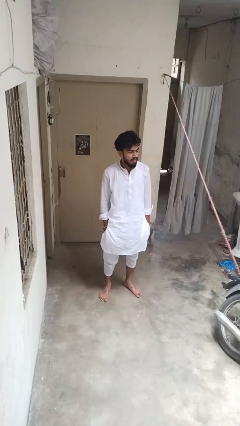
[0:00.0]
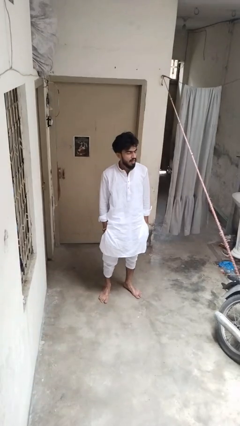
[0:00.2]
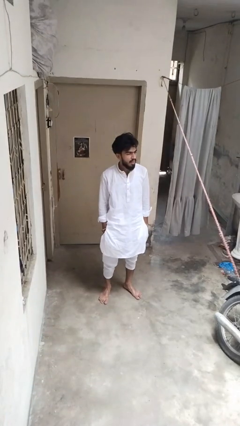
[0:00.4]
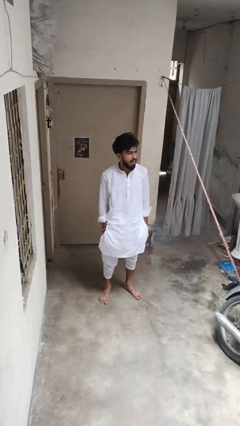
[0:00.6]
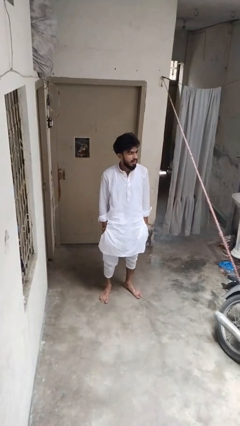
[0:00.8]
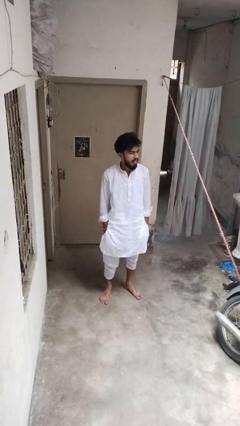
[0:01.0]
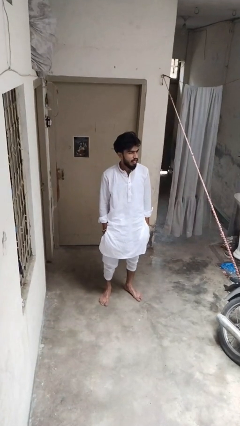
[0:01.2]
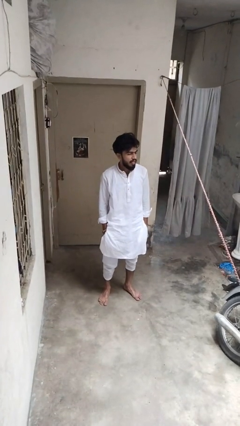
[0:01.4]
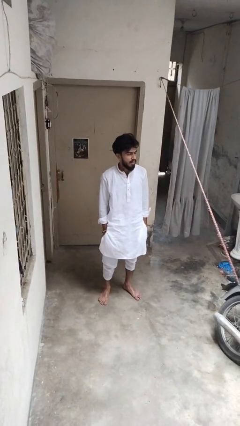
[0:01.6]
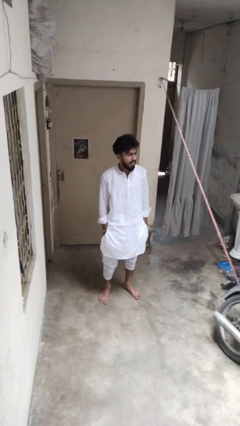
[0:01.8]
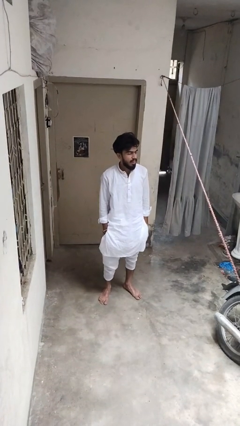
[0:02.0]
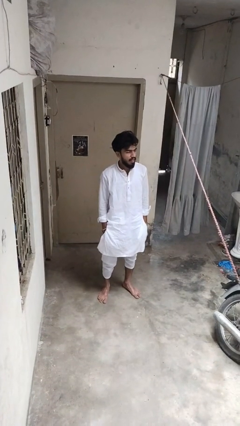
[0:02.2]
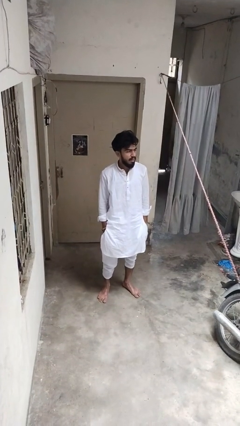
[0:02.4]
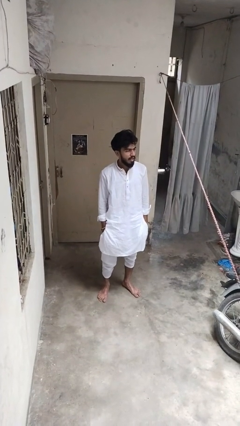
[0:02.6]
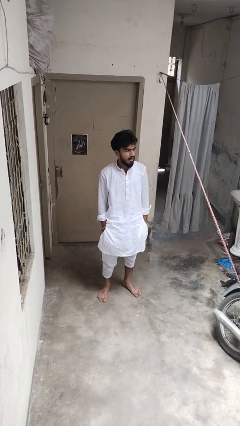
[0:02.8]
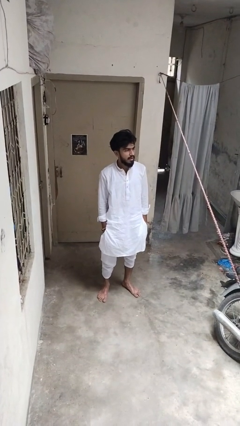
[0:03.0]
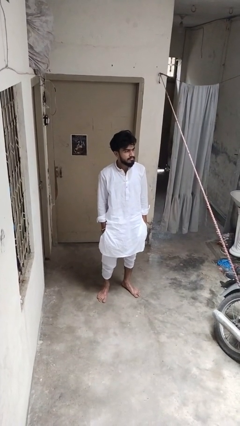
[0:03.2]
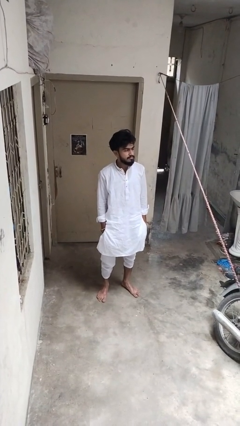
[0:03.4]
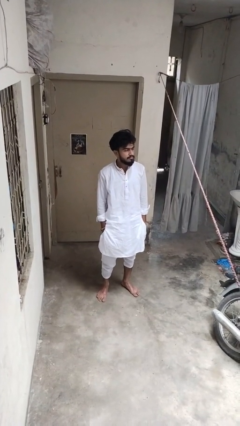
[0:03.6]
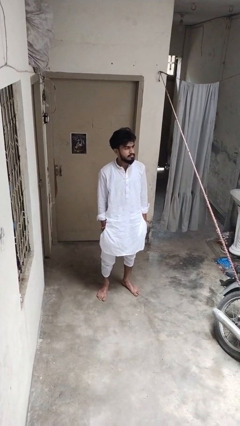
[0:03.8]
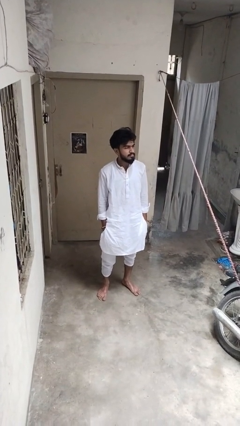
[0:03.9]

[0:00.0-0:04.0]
person sticks out tongue

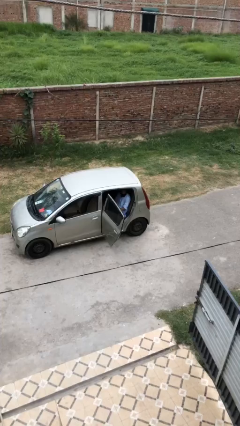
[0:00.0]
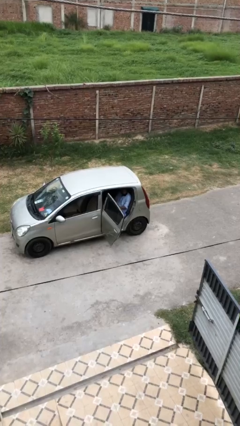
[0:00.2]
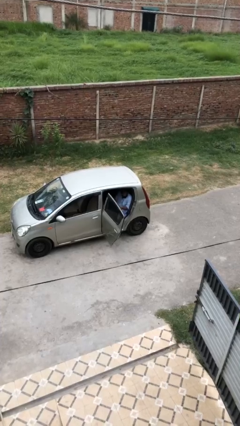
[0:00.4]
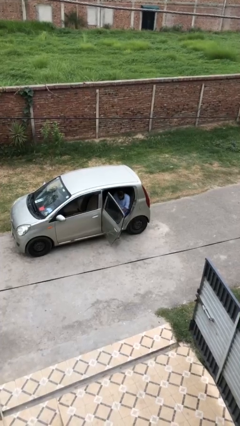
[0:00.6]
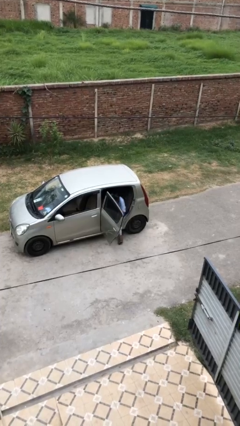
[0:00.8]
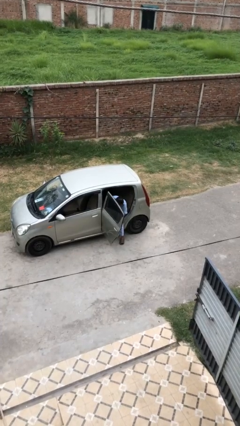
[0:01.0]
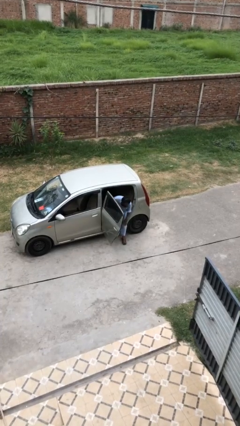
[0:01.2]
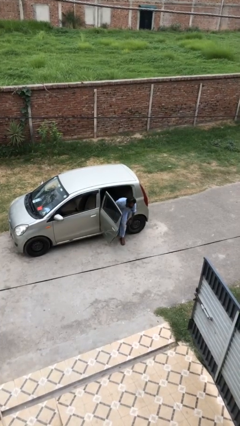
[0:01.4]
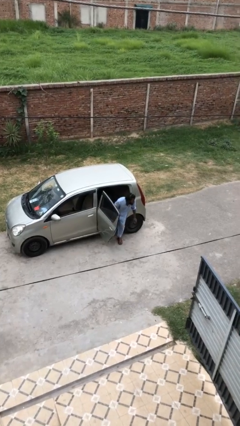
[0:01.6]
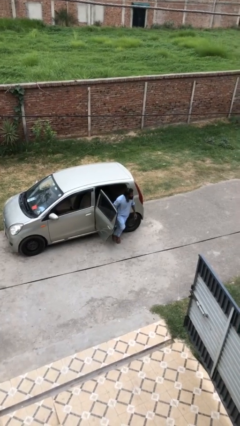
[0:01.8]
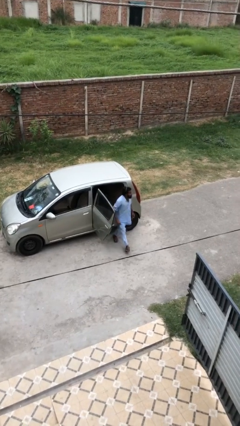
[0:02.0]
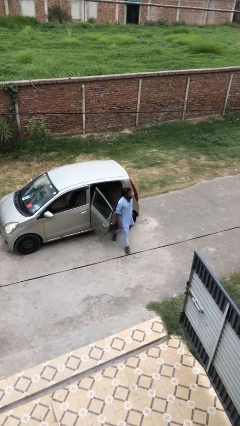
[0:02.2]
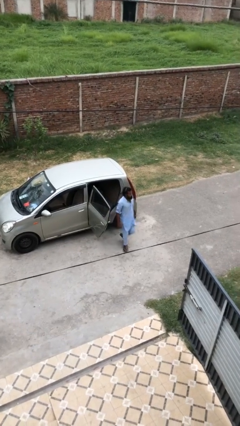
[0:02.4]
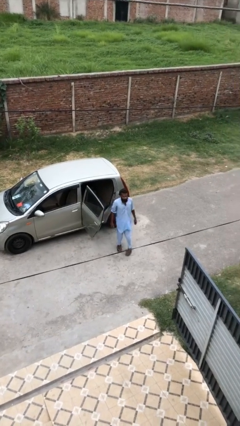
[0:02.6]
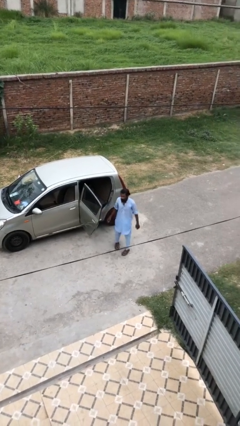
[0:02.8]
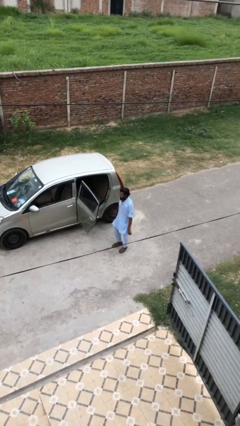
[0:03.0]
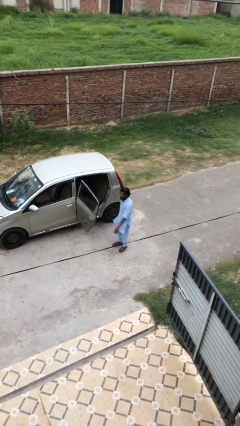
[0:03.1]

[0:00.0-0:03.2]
person exits car

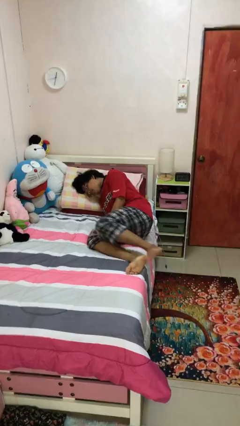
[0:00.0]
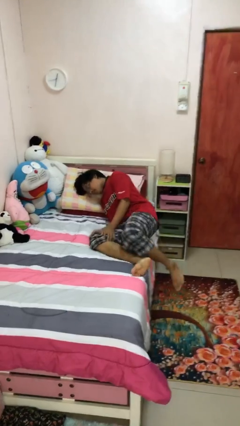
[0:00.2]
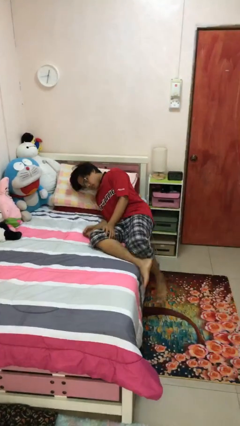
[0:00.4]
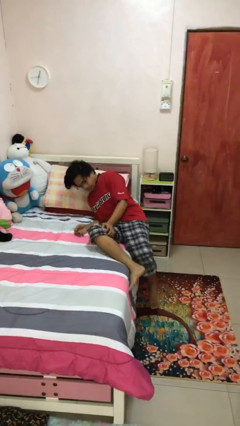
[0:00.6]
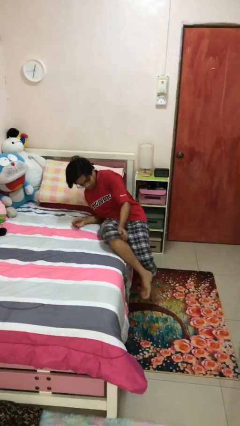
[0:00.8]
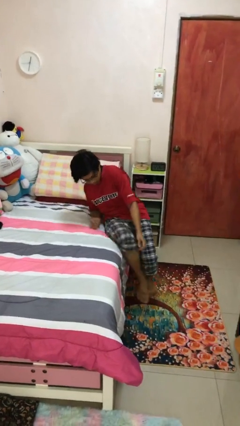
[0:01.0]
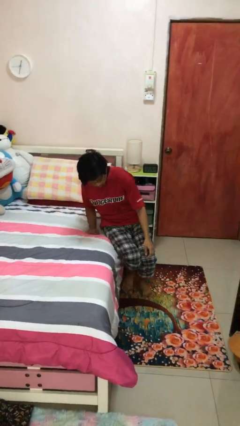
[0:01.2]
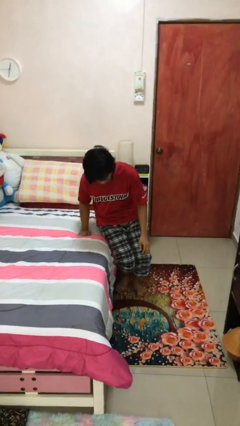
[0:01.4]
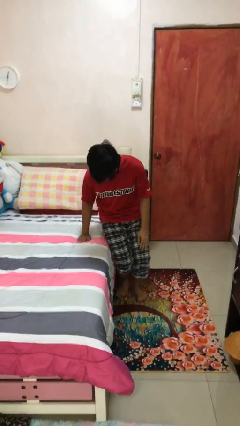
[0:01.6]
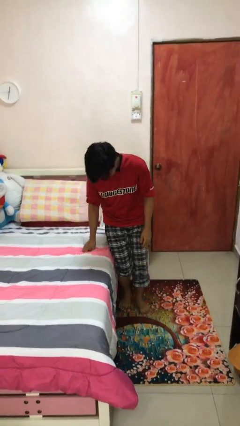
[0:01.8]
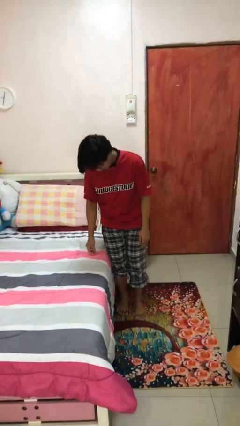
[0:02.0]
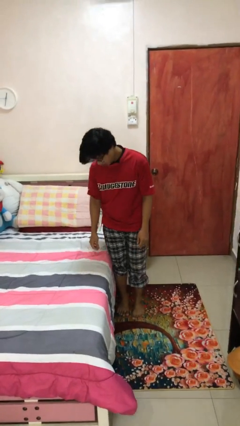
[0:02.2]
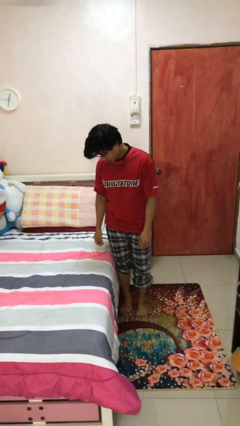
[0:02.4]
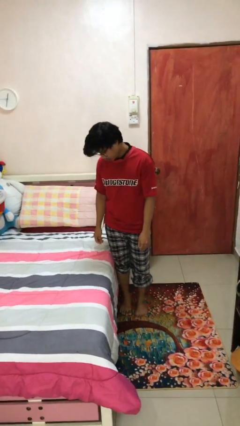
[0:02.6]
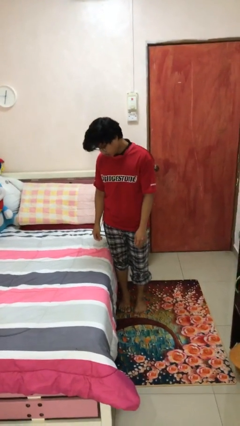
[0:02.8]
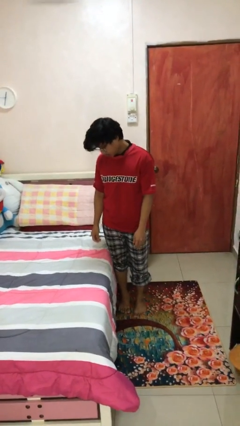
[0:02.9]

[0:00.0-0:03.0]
person stands up

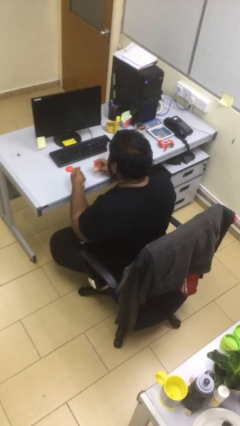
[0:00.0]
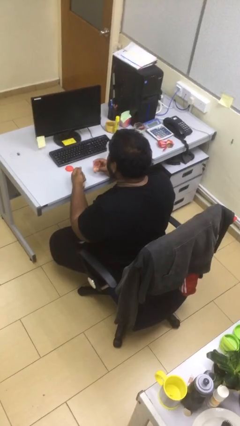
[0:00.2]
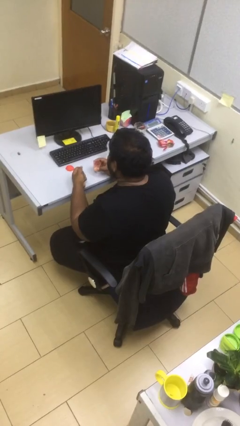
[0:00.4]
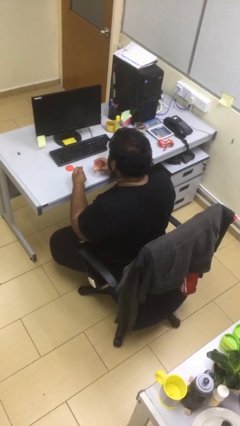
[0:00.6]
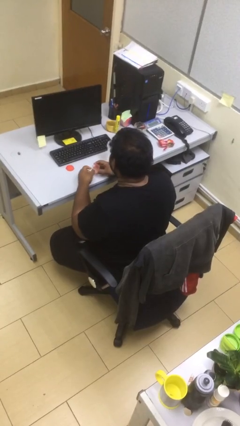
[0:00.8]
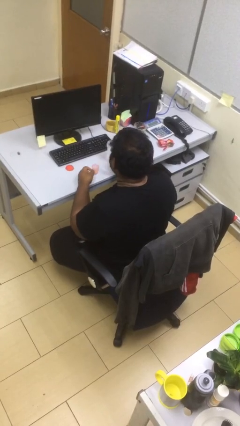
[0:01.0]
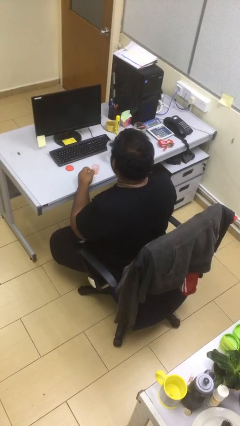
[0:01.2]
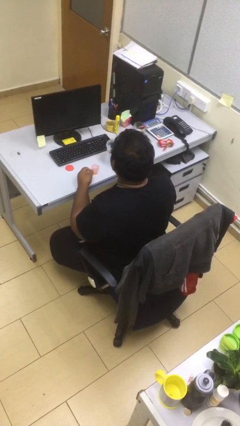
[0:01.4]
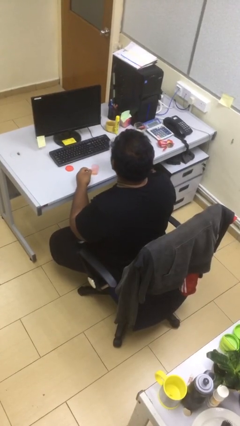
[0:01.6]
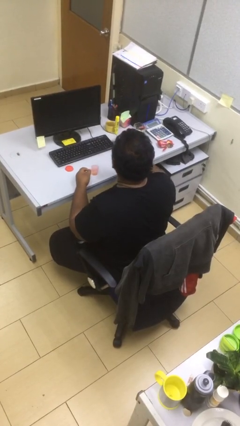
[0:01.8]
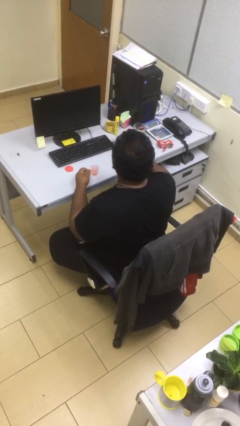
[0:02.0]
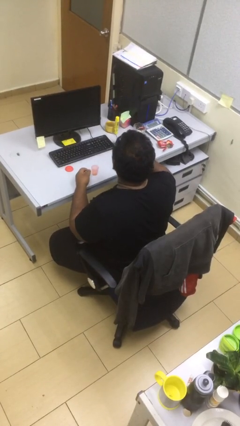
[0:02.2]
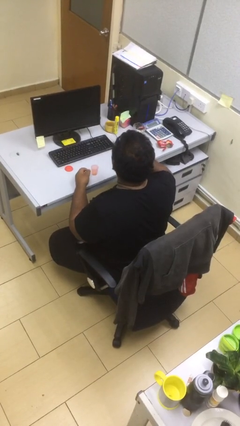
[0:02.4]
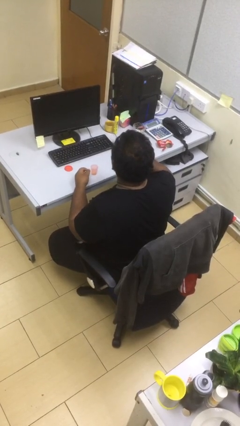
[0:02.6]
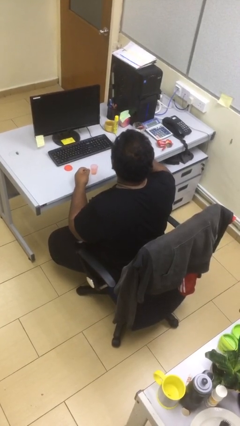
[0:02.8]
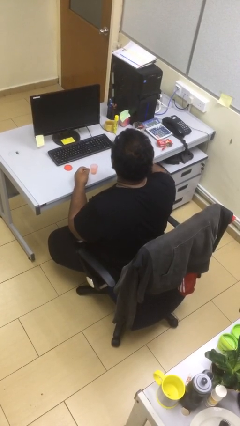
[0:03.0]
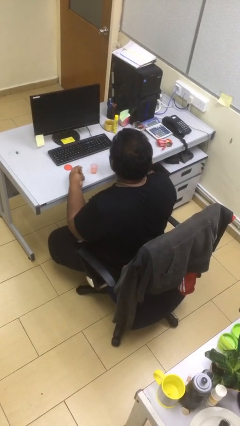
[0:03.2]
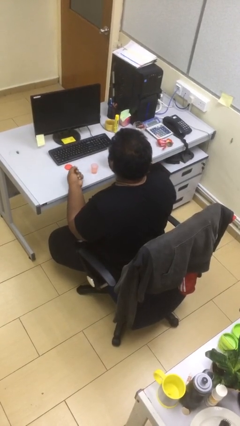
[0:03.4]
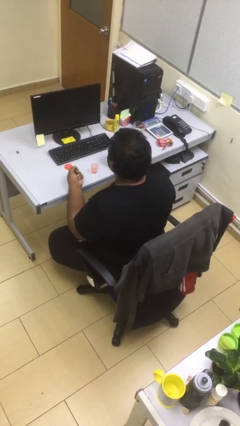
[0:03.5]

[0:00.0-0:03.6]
person drinks from cup

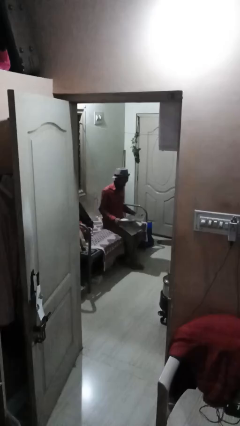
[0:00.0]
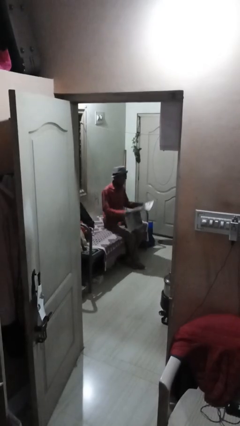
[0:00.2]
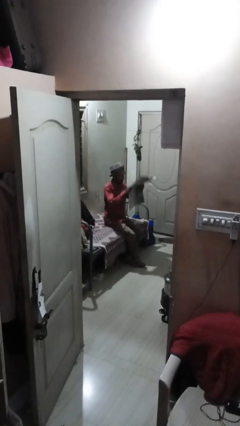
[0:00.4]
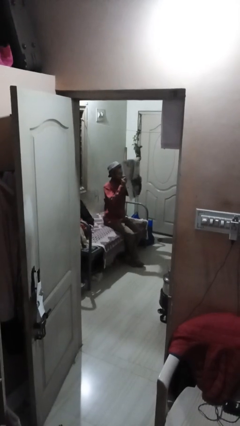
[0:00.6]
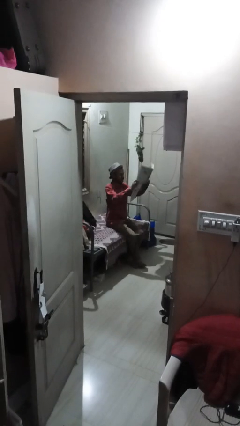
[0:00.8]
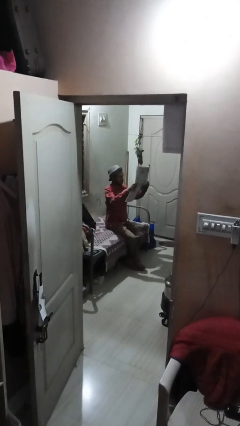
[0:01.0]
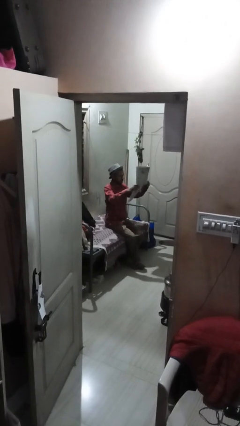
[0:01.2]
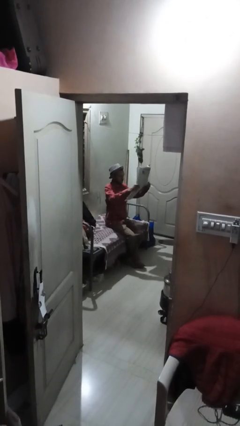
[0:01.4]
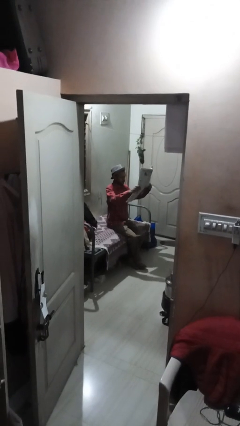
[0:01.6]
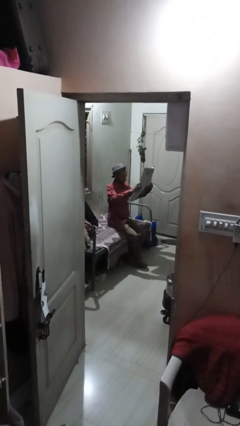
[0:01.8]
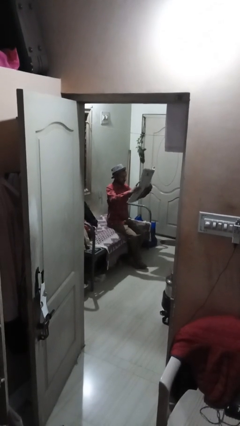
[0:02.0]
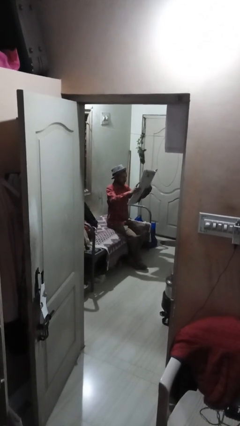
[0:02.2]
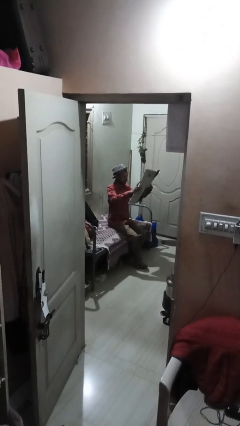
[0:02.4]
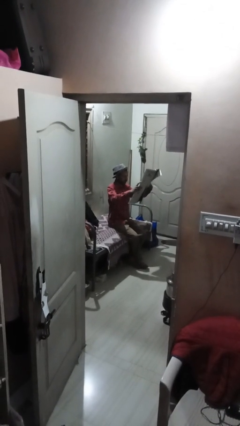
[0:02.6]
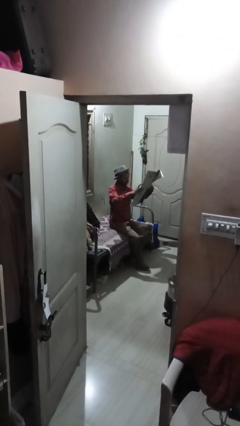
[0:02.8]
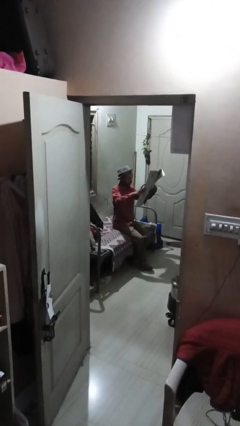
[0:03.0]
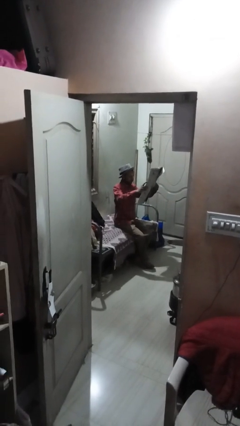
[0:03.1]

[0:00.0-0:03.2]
person reads newspaper

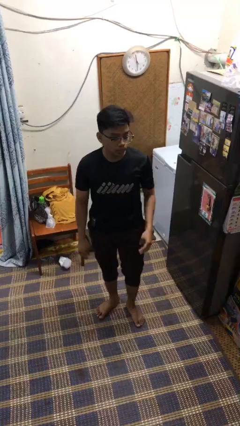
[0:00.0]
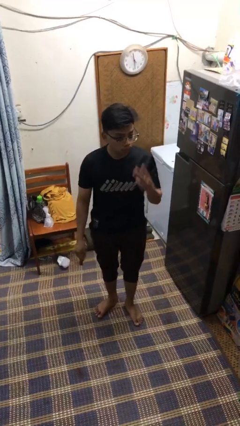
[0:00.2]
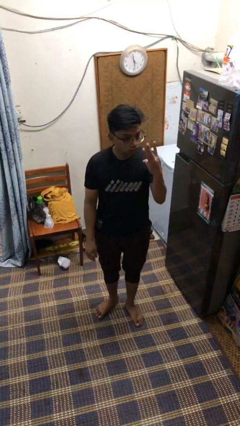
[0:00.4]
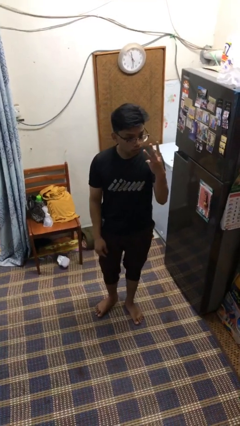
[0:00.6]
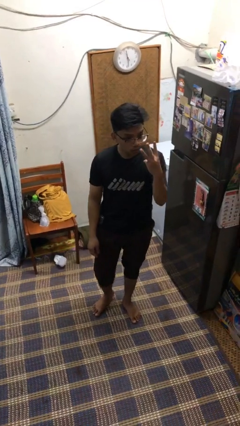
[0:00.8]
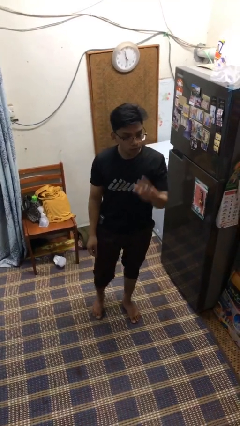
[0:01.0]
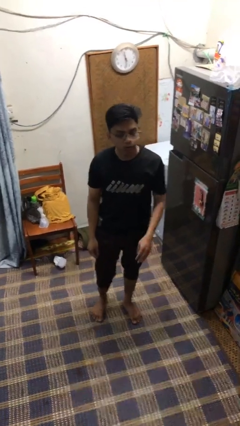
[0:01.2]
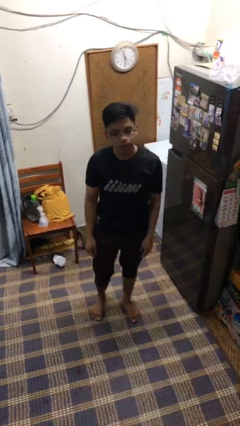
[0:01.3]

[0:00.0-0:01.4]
person gestures number three
